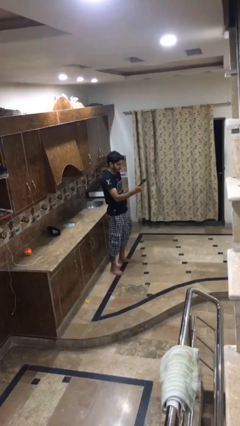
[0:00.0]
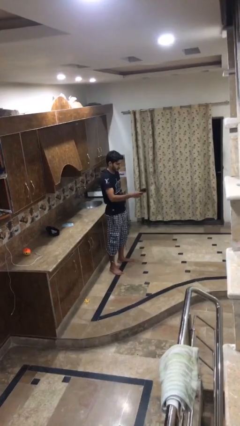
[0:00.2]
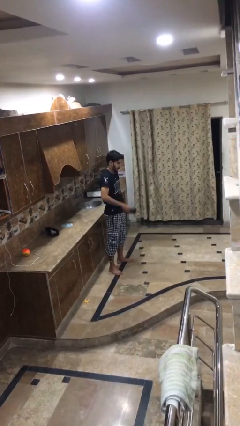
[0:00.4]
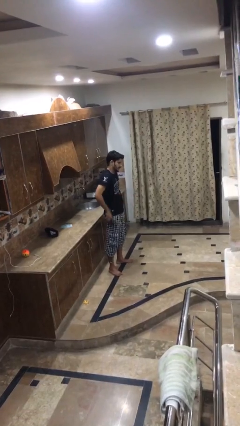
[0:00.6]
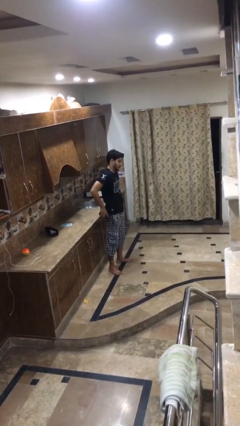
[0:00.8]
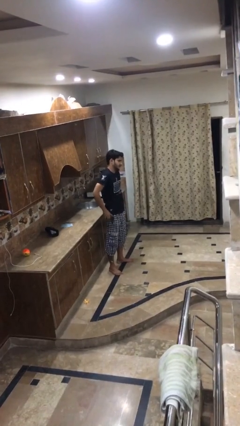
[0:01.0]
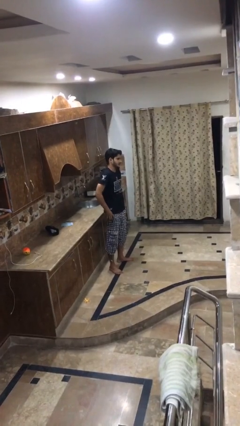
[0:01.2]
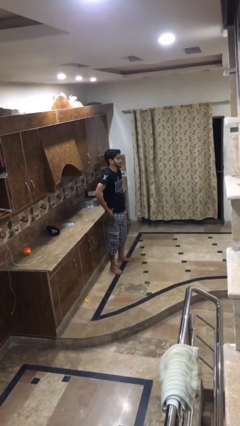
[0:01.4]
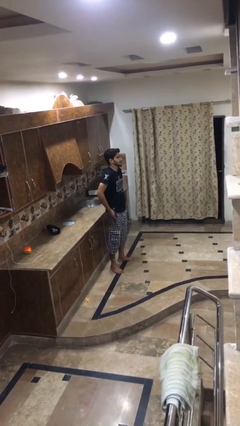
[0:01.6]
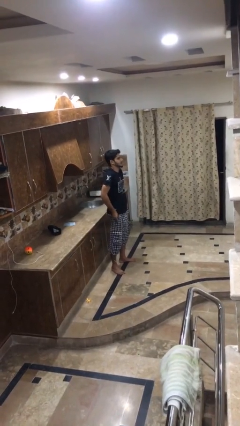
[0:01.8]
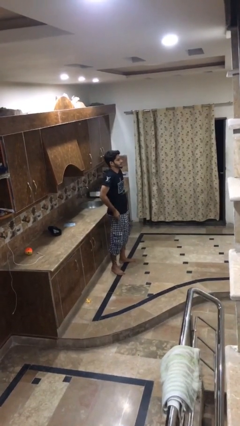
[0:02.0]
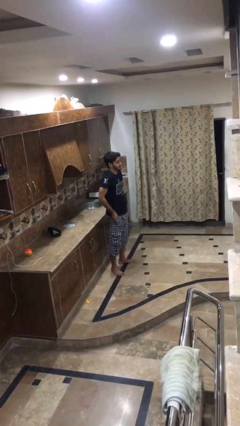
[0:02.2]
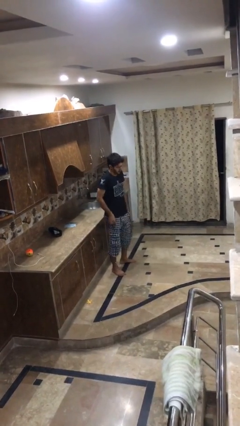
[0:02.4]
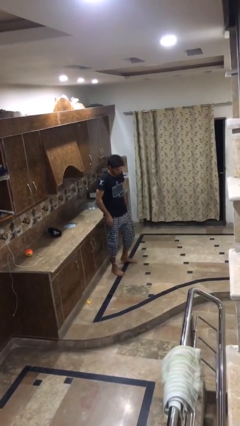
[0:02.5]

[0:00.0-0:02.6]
person puts phone into pocket

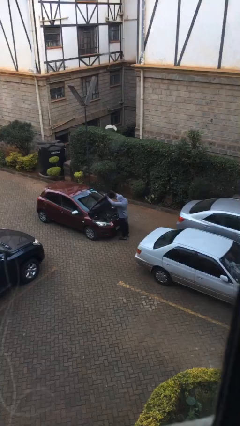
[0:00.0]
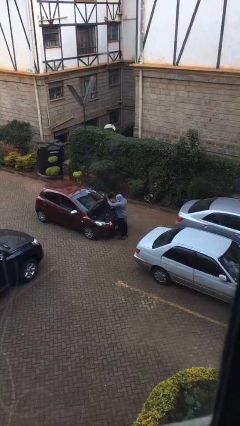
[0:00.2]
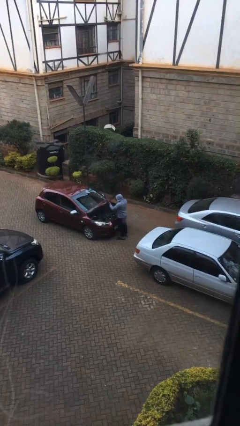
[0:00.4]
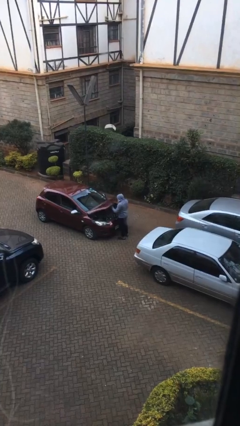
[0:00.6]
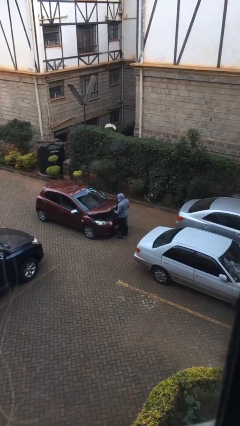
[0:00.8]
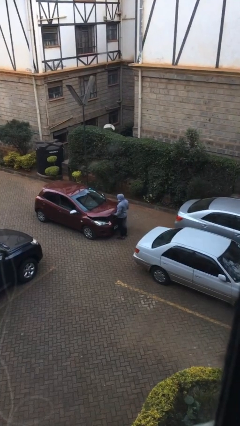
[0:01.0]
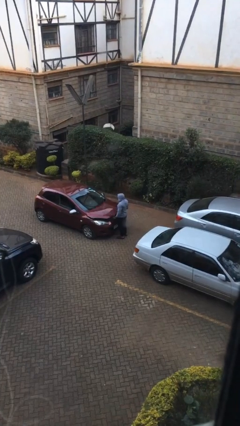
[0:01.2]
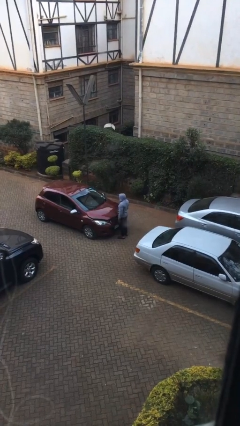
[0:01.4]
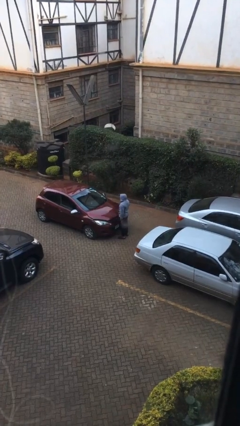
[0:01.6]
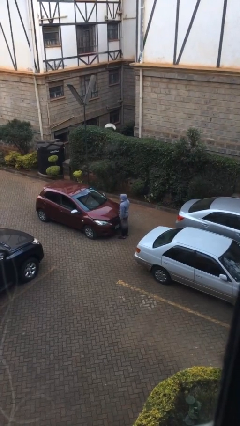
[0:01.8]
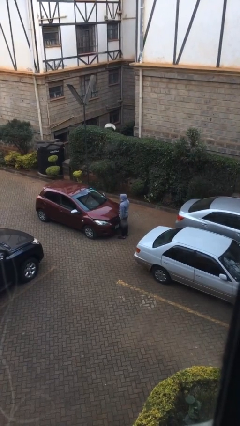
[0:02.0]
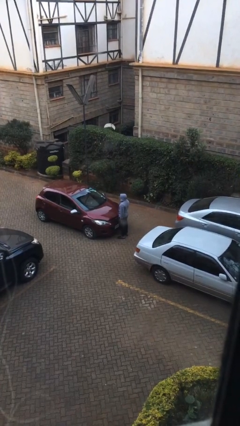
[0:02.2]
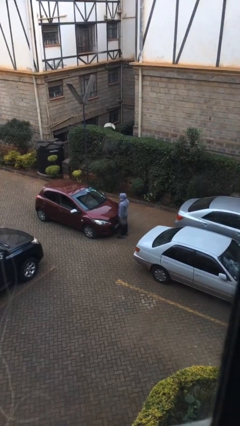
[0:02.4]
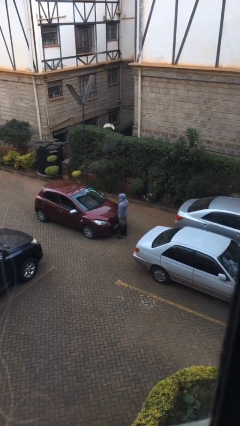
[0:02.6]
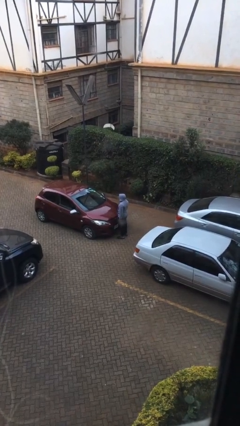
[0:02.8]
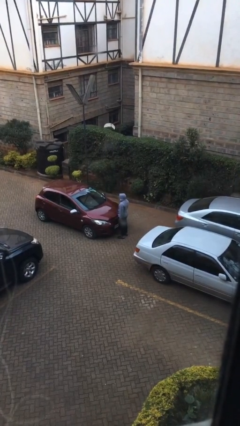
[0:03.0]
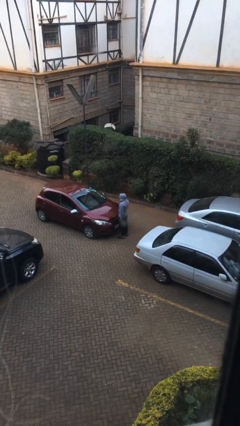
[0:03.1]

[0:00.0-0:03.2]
person closes car hood

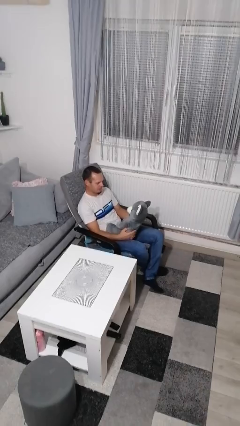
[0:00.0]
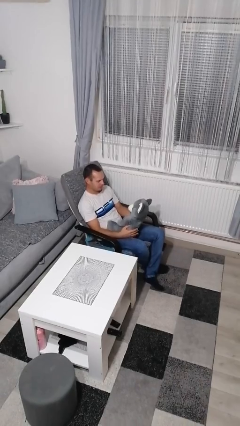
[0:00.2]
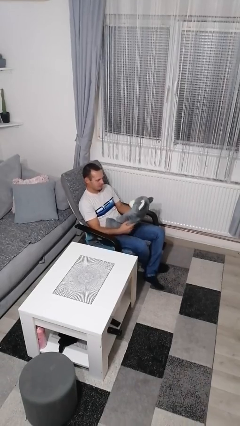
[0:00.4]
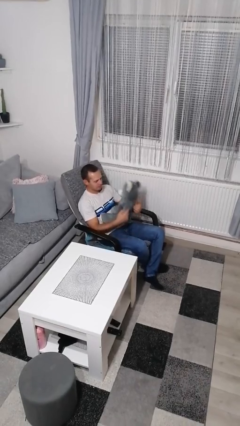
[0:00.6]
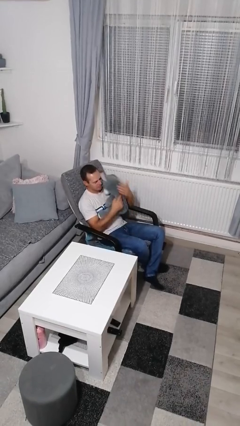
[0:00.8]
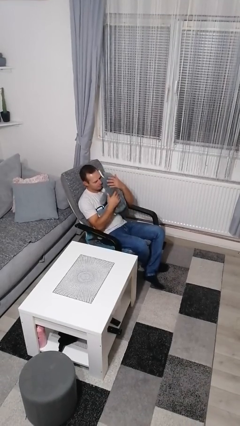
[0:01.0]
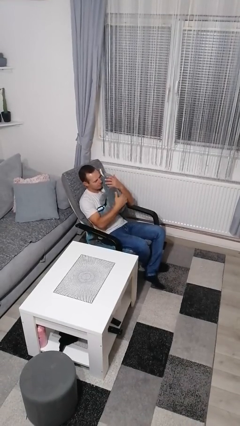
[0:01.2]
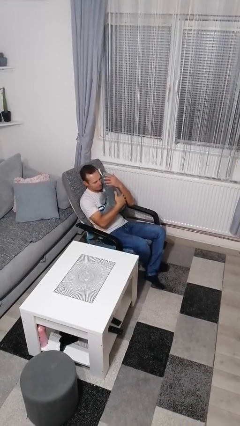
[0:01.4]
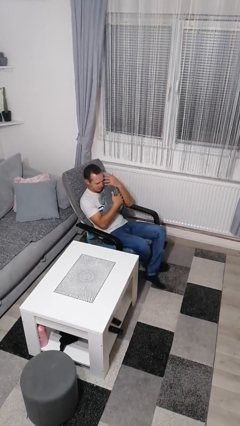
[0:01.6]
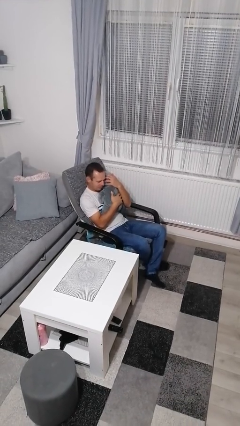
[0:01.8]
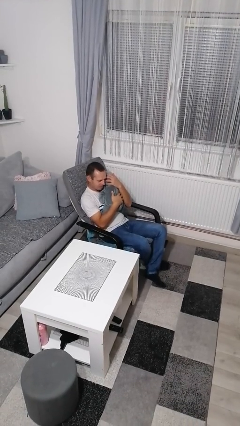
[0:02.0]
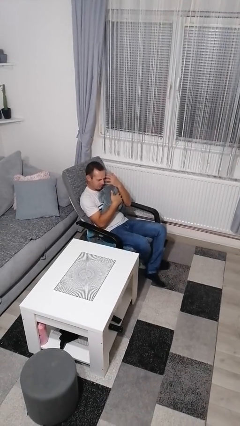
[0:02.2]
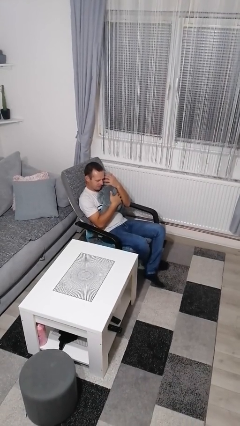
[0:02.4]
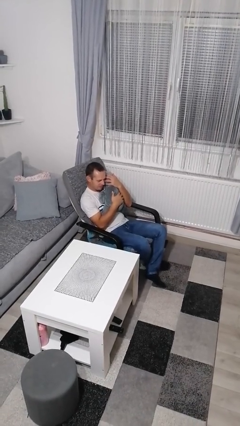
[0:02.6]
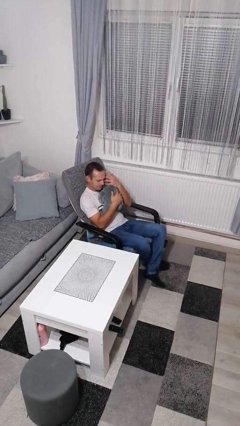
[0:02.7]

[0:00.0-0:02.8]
person hugs stuffed animal

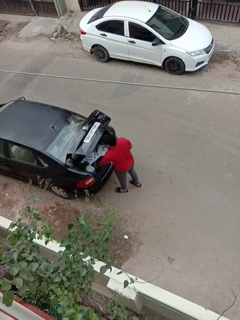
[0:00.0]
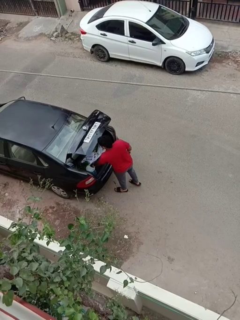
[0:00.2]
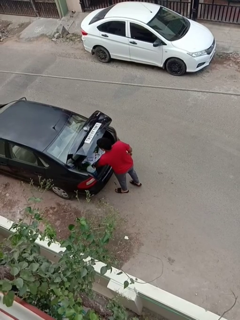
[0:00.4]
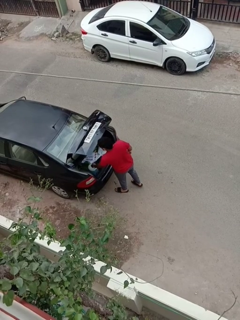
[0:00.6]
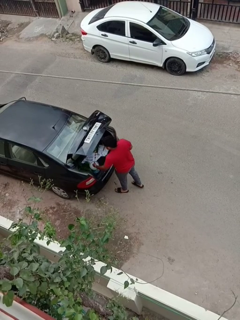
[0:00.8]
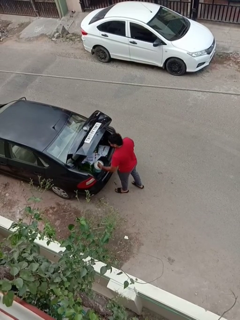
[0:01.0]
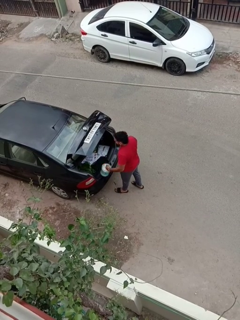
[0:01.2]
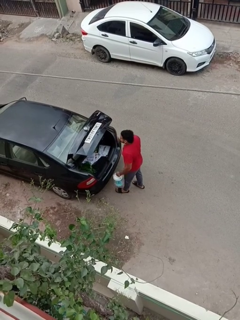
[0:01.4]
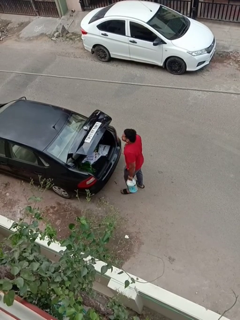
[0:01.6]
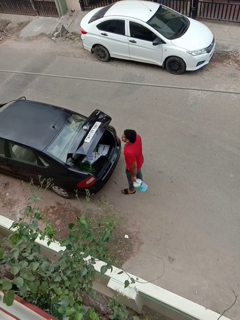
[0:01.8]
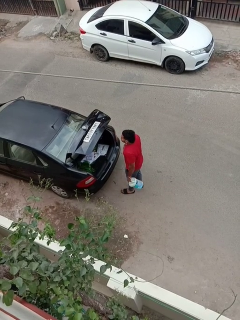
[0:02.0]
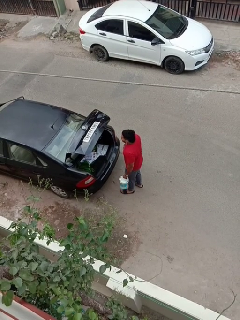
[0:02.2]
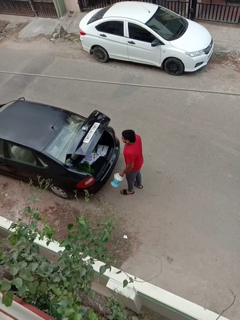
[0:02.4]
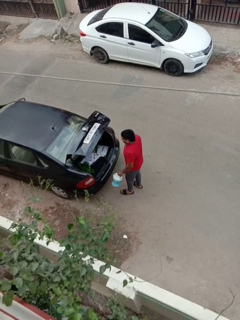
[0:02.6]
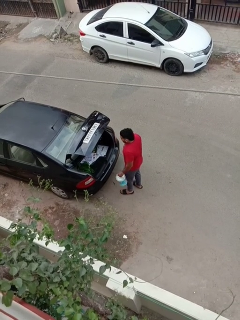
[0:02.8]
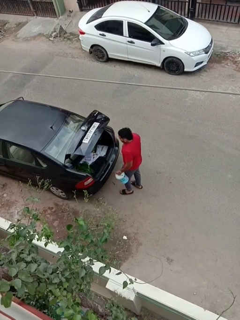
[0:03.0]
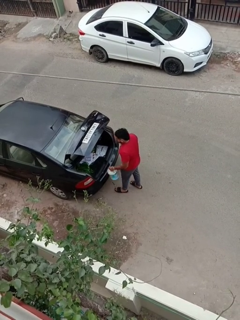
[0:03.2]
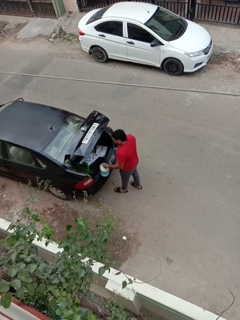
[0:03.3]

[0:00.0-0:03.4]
person unloads car

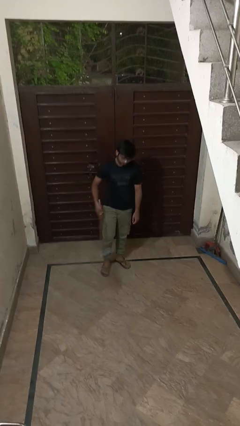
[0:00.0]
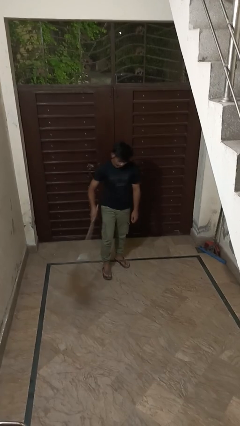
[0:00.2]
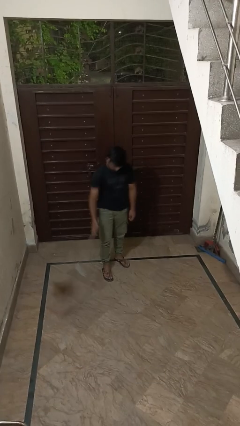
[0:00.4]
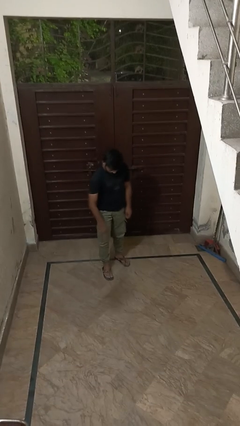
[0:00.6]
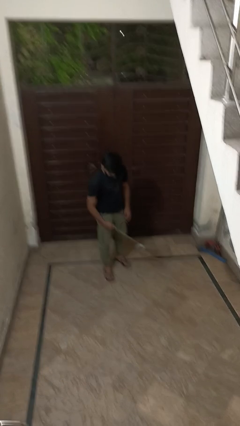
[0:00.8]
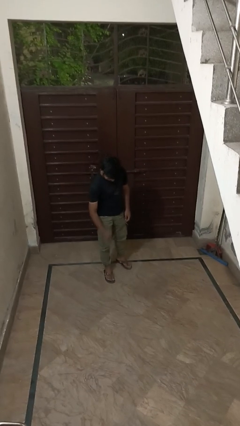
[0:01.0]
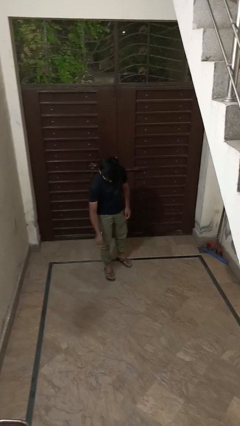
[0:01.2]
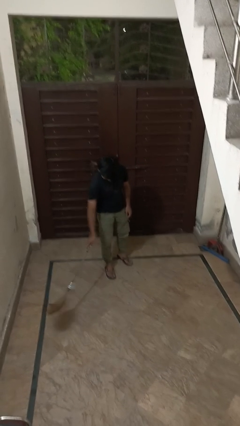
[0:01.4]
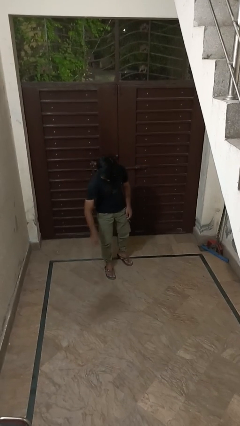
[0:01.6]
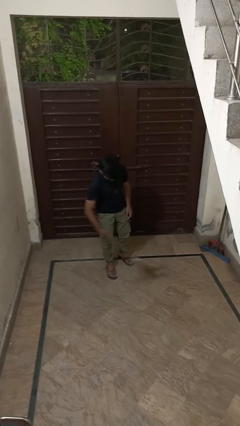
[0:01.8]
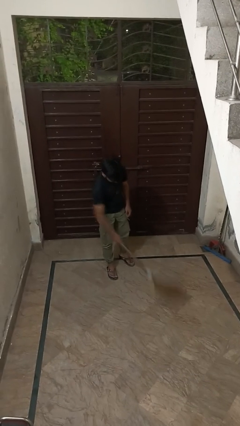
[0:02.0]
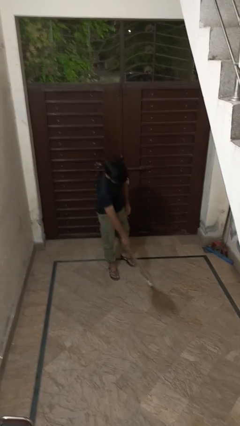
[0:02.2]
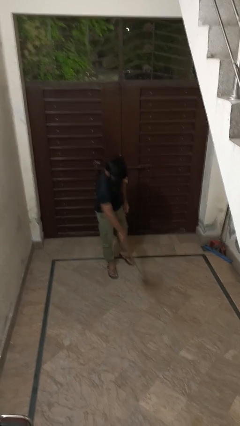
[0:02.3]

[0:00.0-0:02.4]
person sweeps floor

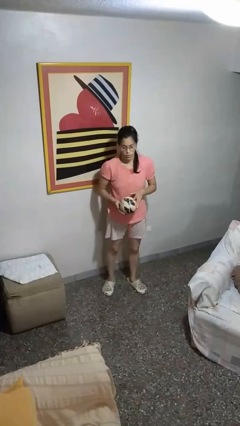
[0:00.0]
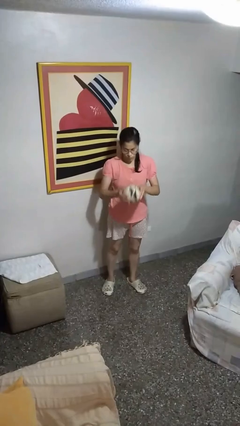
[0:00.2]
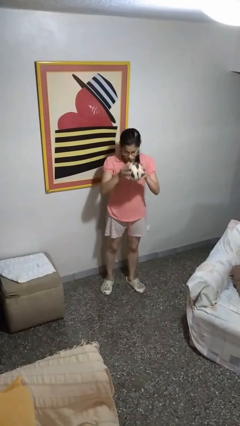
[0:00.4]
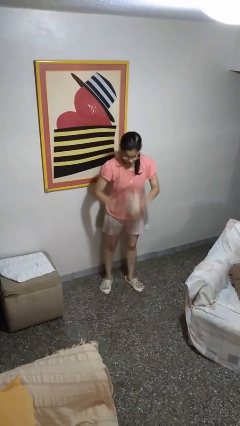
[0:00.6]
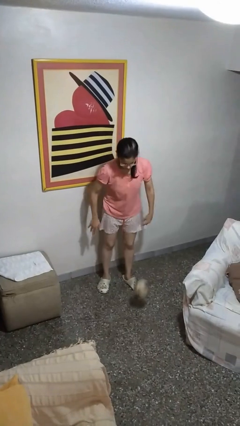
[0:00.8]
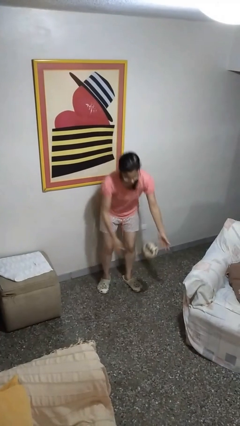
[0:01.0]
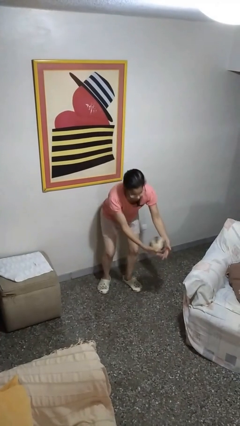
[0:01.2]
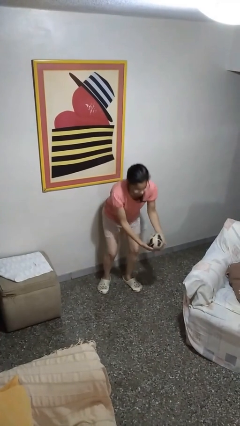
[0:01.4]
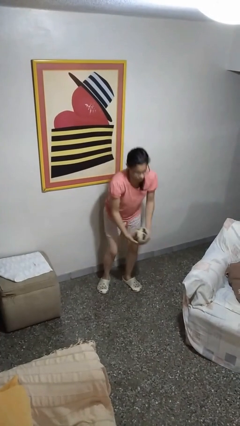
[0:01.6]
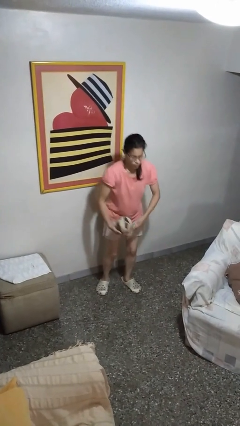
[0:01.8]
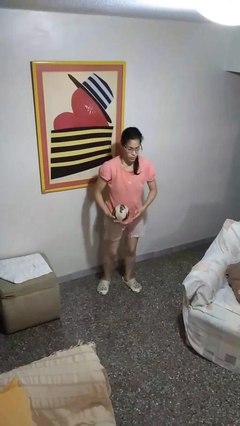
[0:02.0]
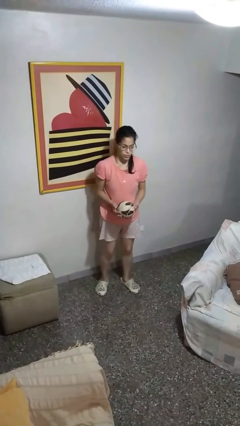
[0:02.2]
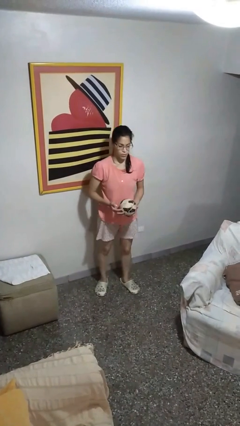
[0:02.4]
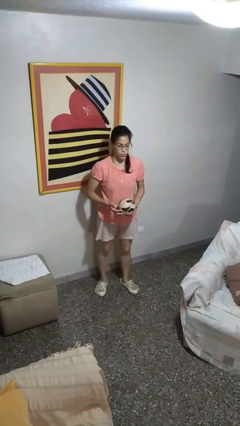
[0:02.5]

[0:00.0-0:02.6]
person bounces ball on floor

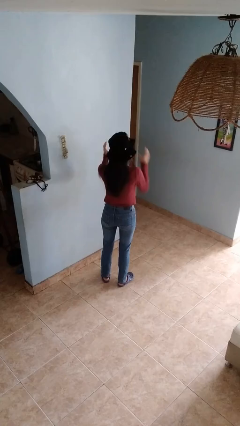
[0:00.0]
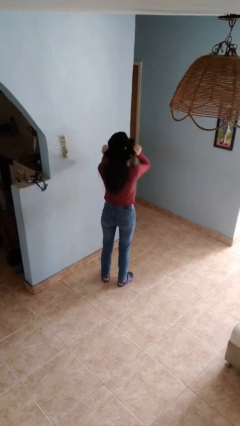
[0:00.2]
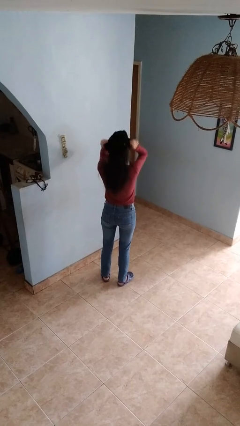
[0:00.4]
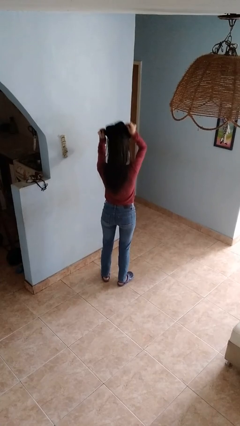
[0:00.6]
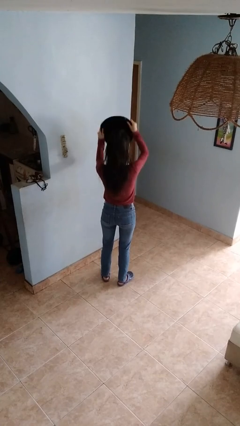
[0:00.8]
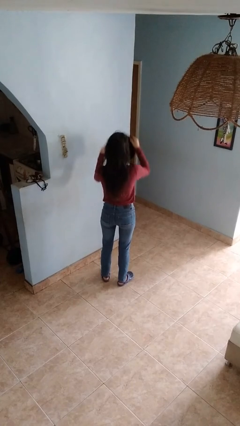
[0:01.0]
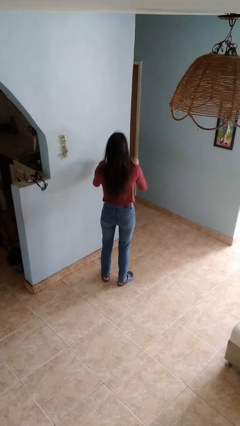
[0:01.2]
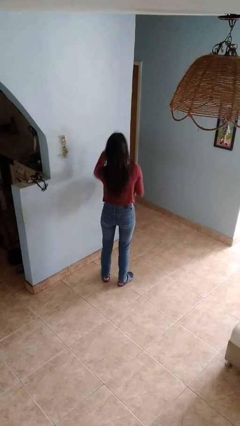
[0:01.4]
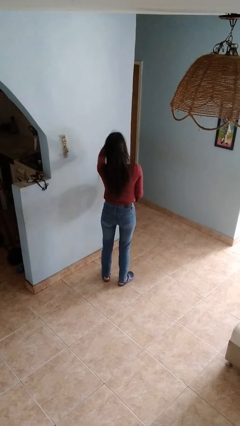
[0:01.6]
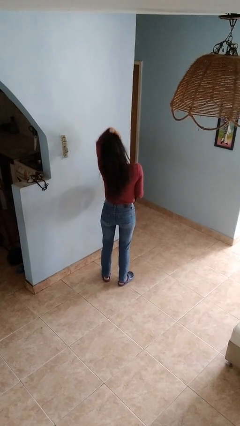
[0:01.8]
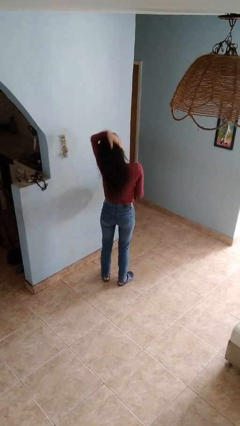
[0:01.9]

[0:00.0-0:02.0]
person takes off hat
